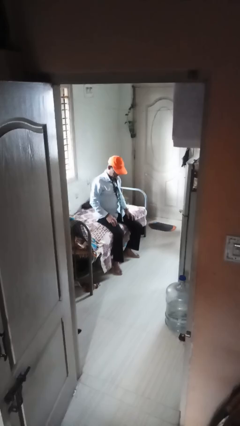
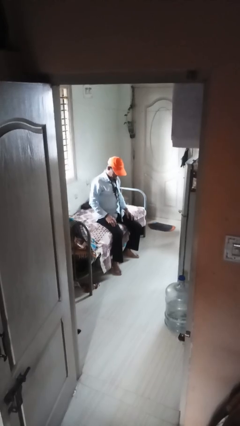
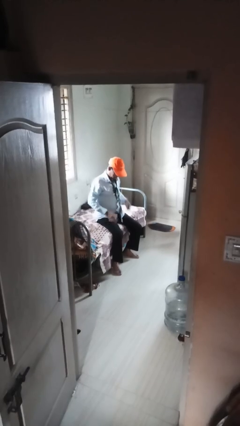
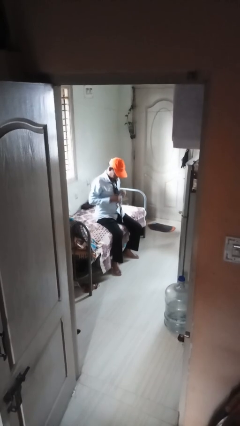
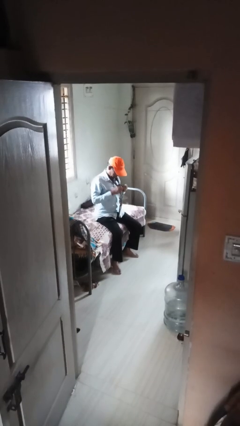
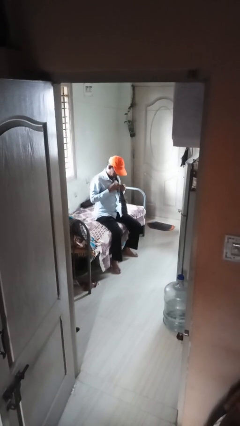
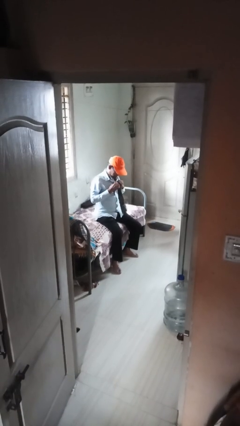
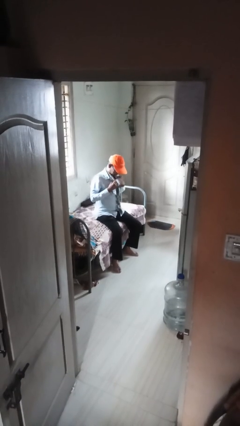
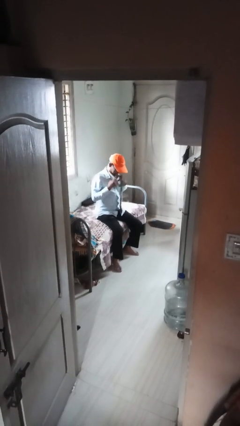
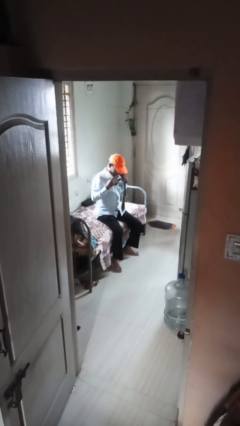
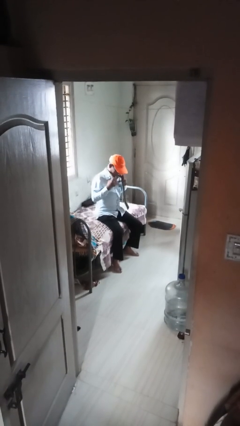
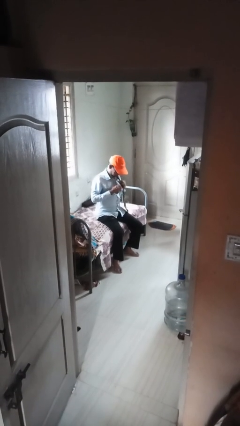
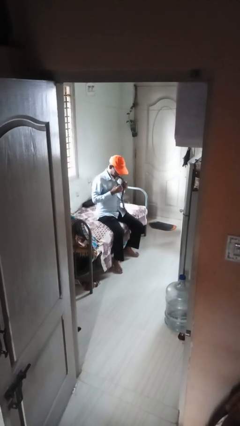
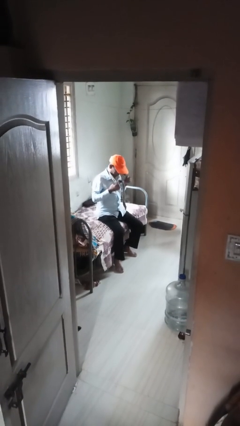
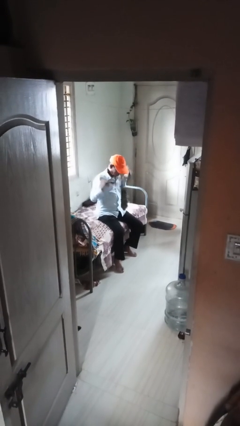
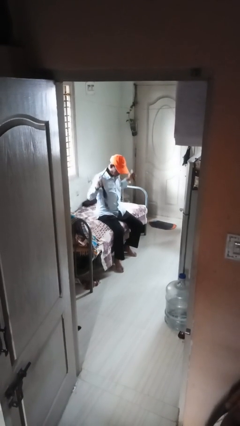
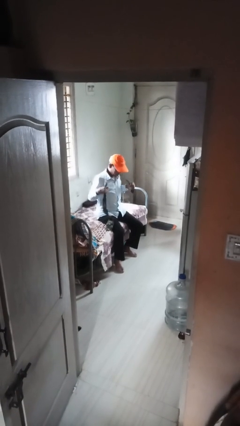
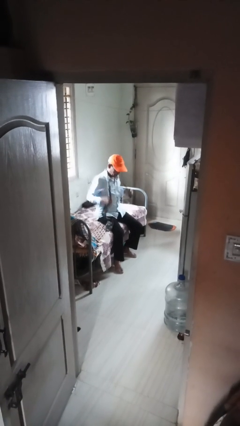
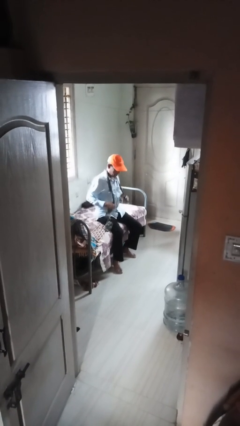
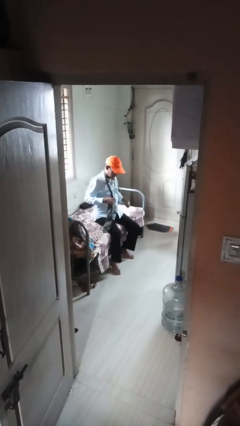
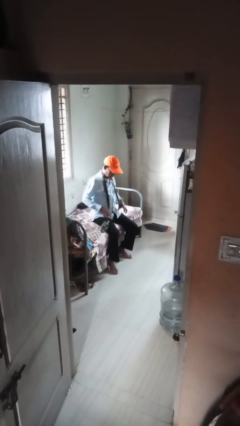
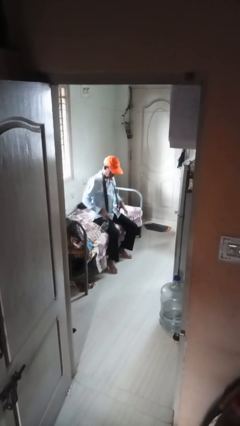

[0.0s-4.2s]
person takes off necktie

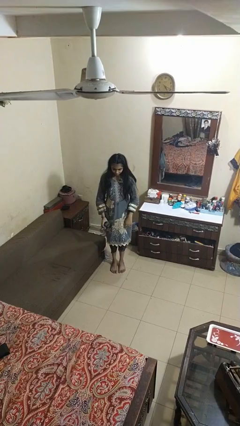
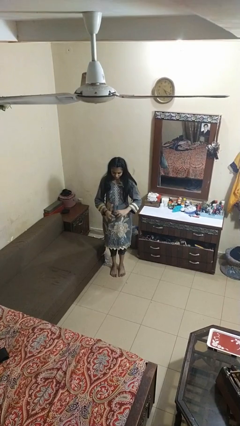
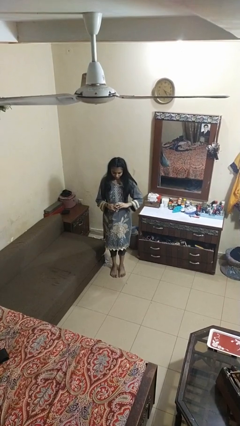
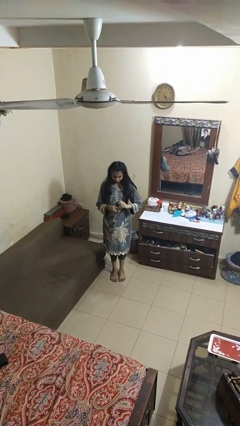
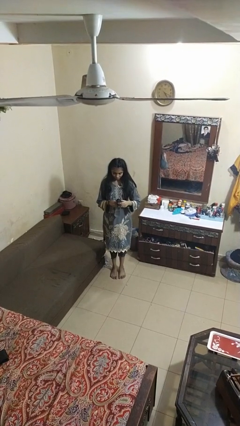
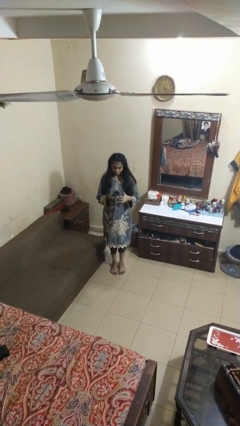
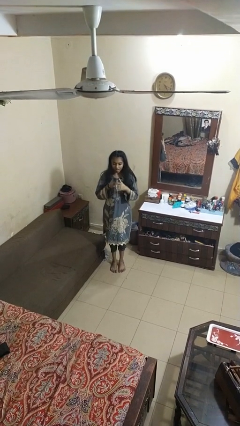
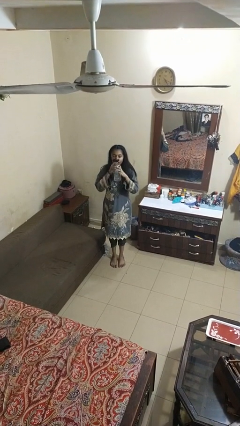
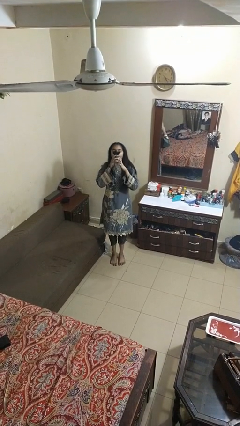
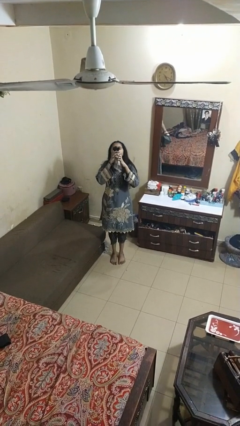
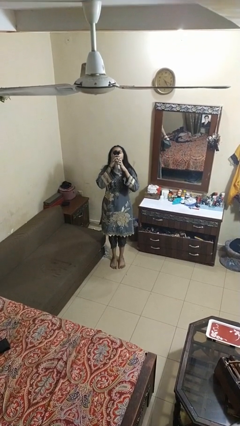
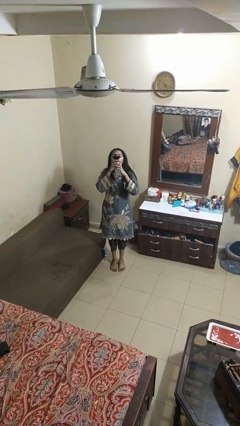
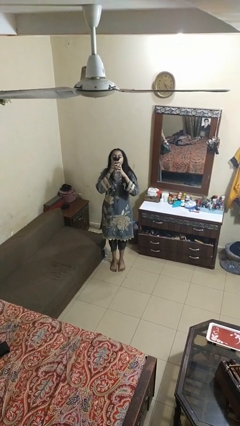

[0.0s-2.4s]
person drinks from bottle

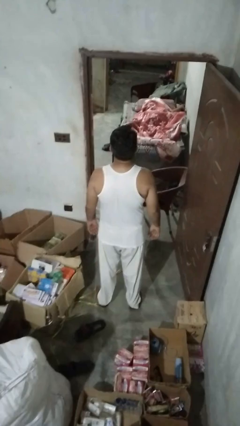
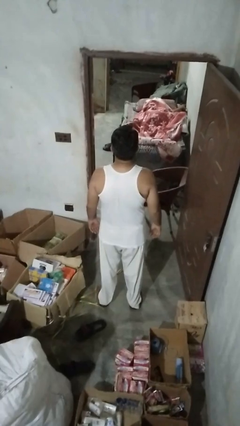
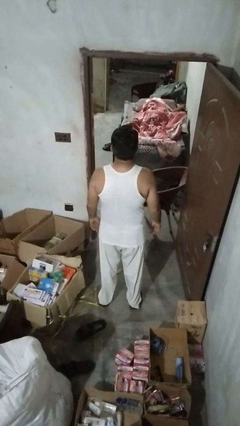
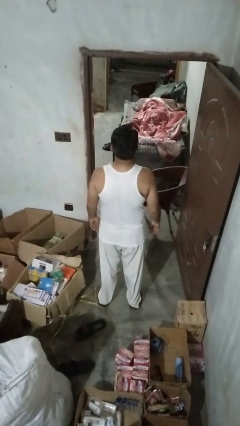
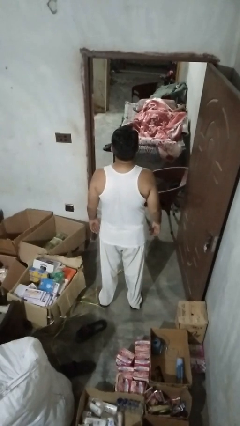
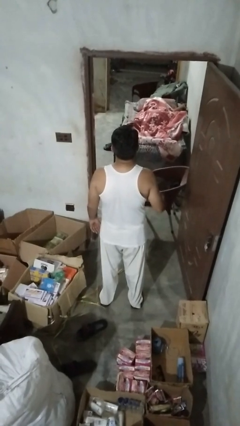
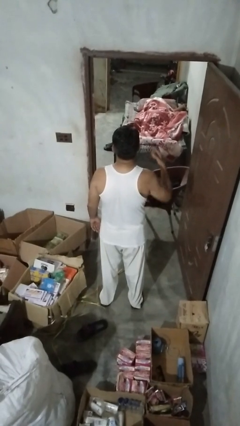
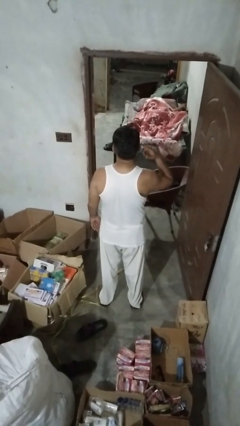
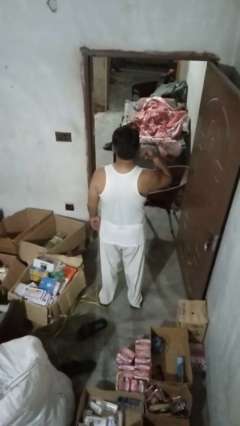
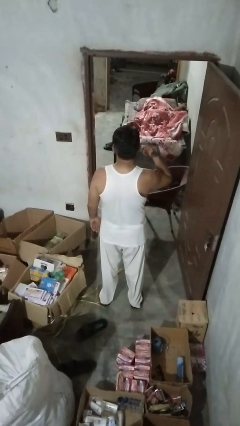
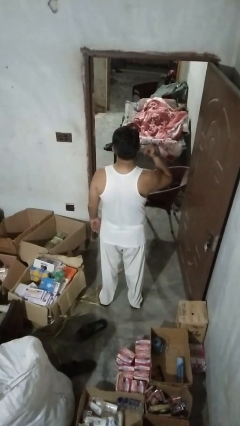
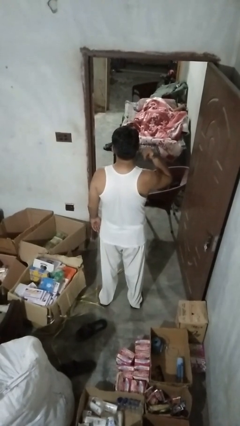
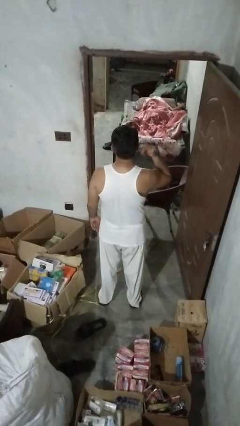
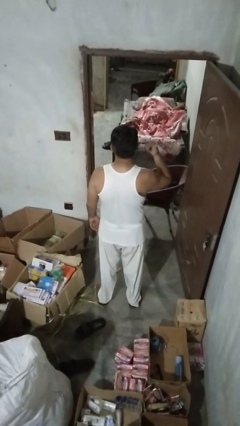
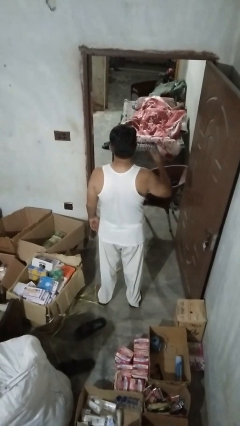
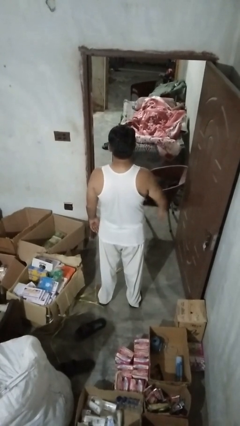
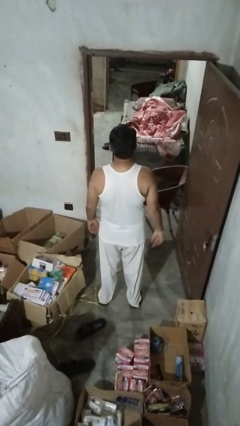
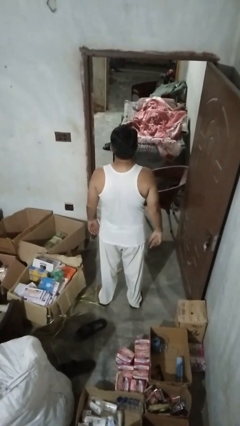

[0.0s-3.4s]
person touches earlobe

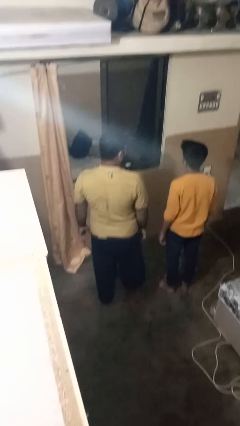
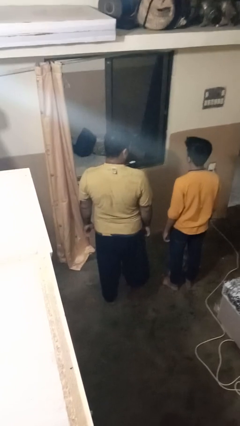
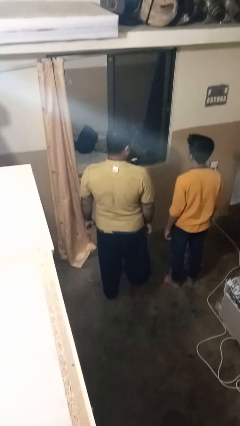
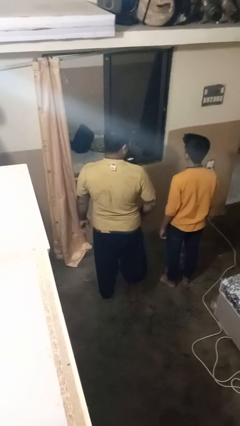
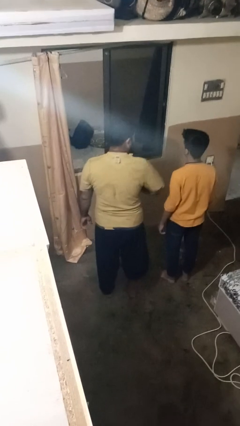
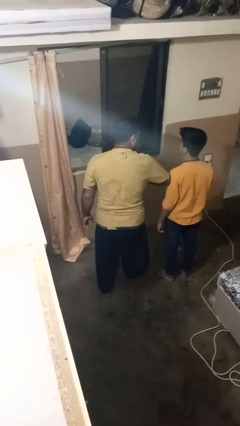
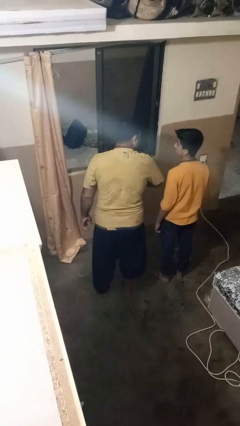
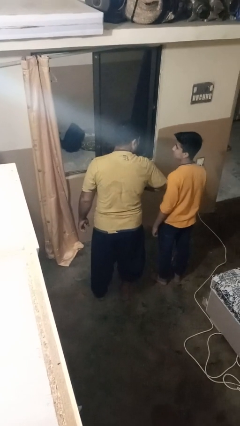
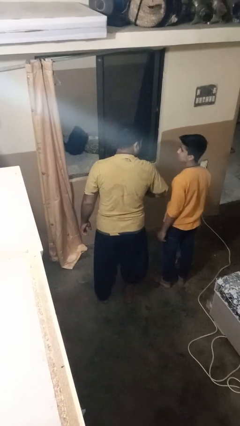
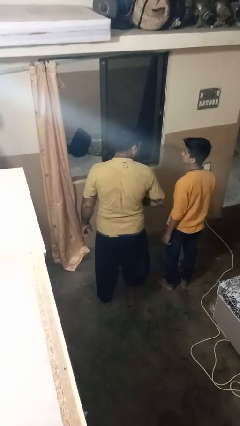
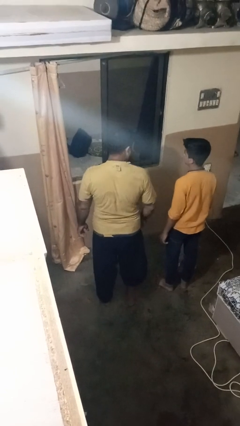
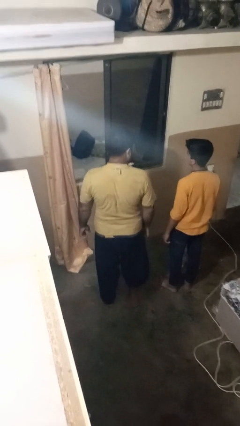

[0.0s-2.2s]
person nudges person with elbow

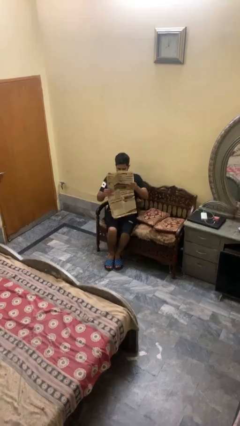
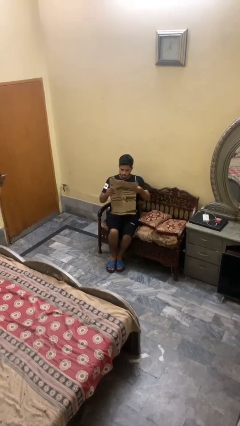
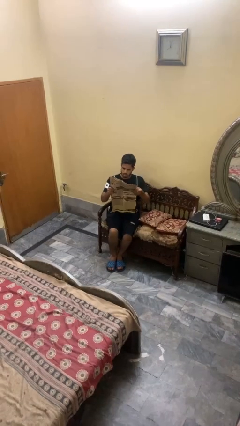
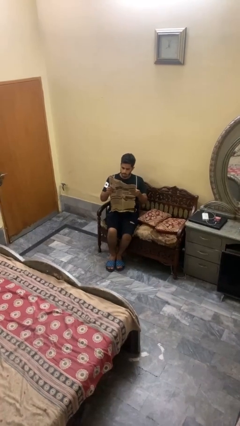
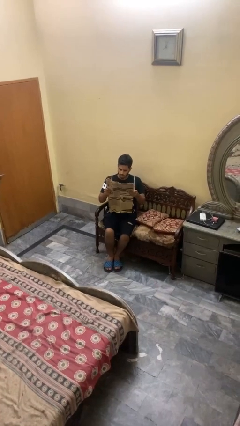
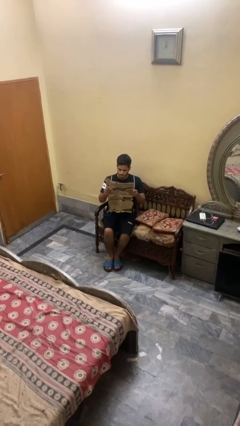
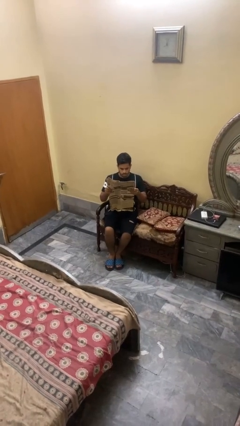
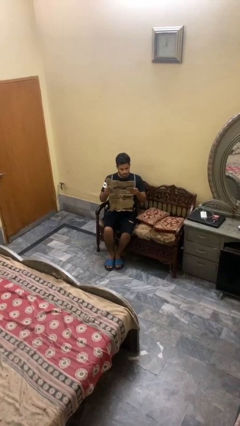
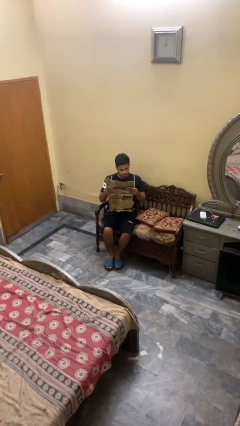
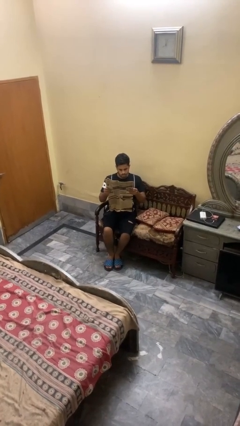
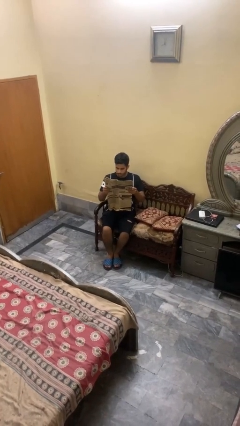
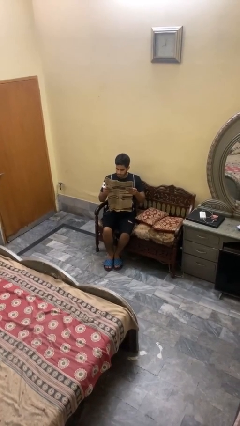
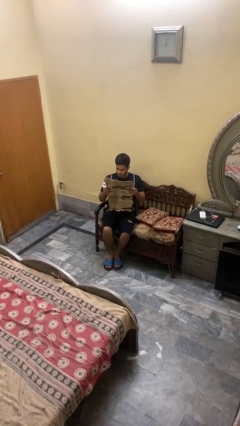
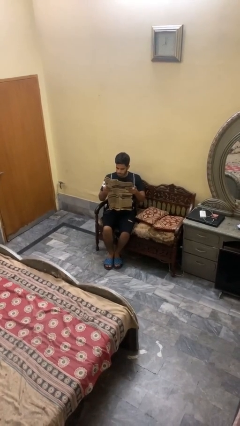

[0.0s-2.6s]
person reads newspaper

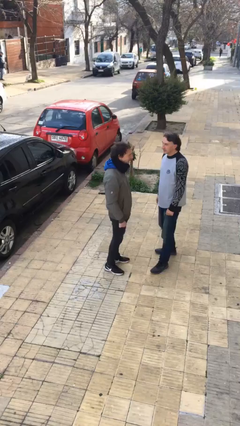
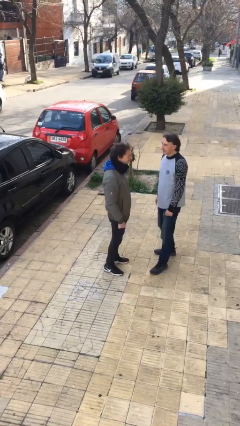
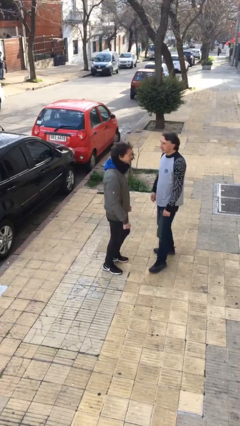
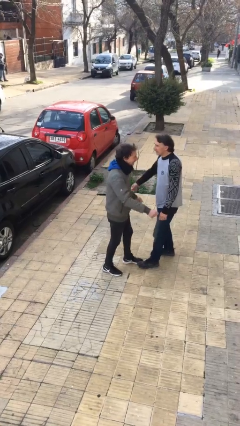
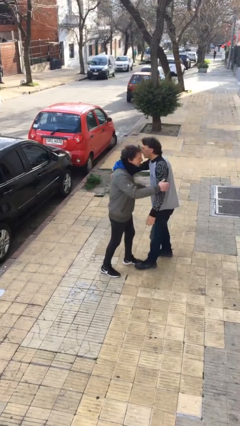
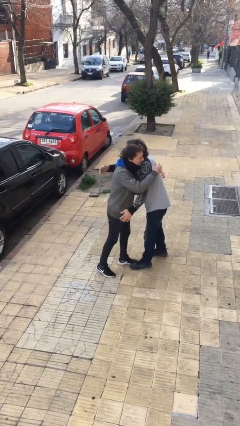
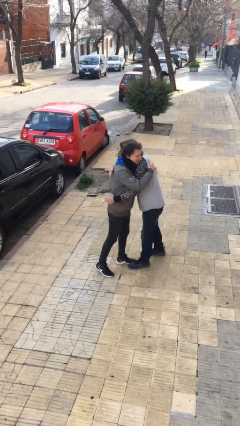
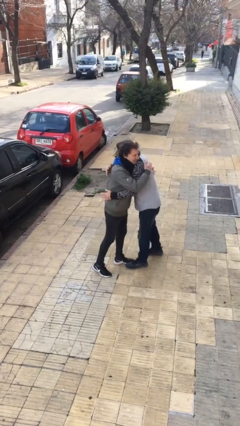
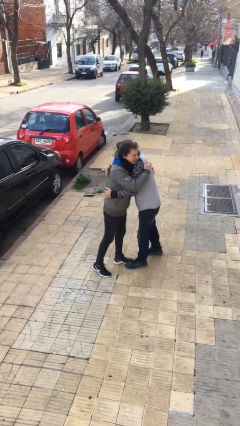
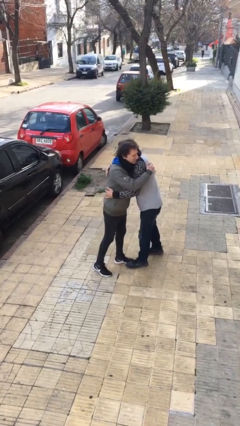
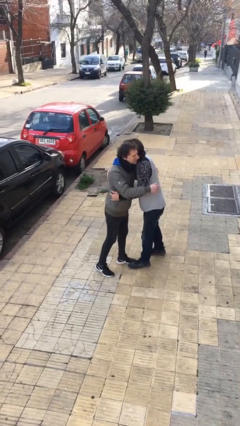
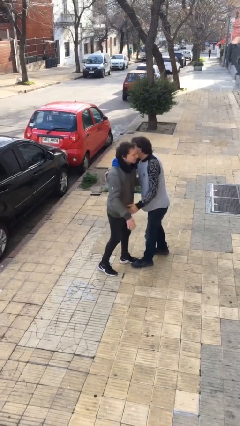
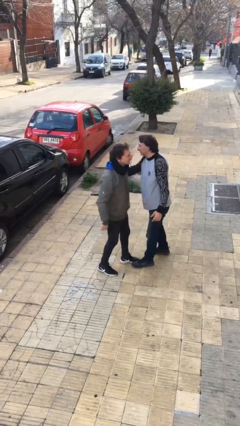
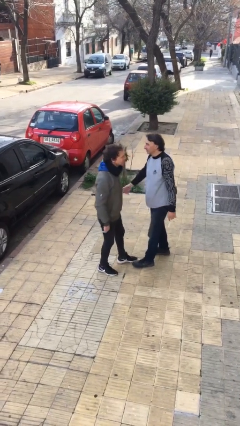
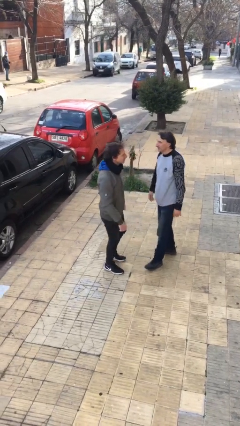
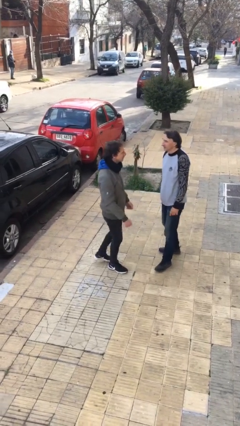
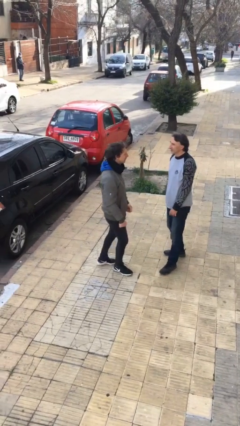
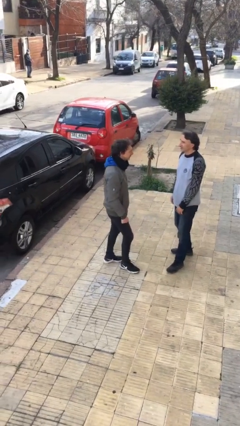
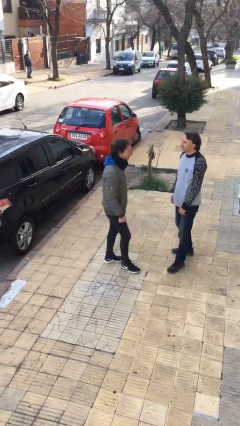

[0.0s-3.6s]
person embraces person
